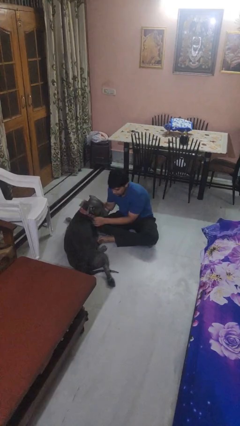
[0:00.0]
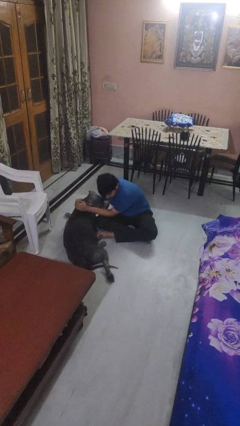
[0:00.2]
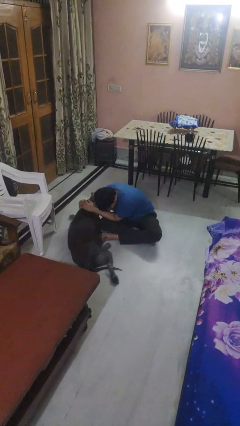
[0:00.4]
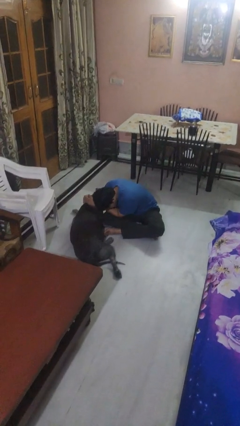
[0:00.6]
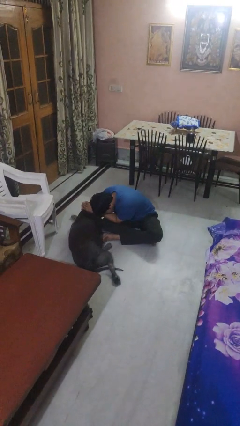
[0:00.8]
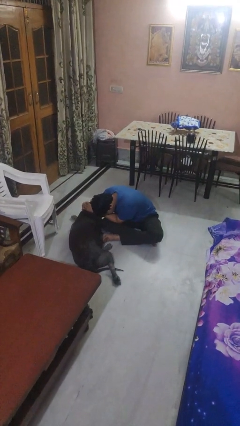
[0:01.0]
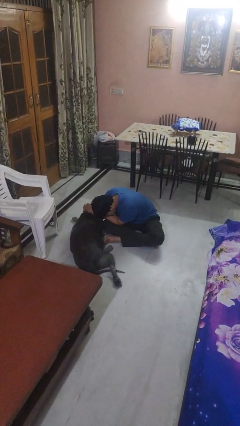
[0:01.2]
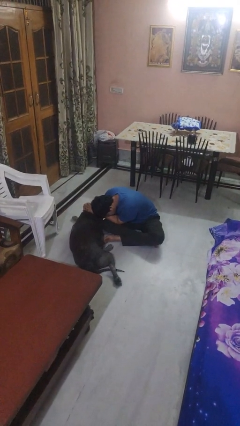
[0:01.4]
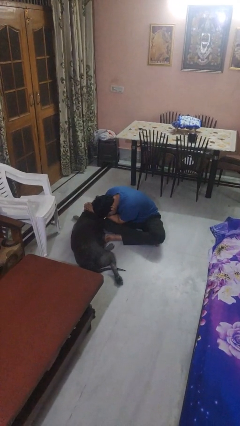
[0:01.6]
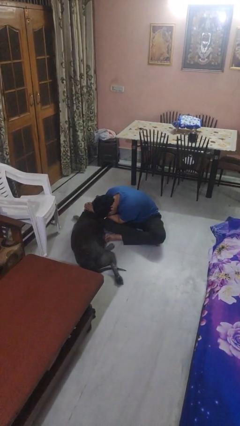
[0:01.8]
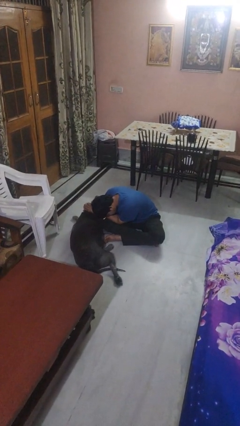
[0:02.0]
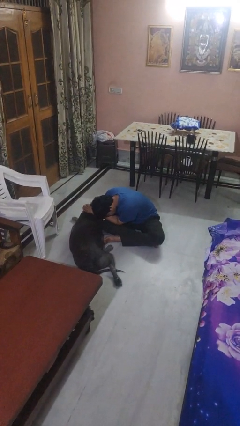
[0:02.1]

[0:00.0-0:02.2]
person hugs dog

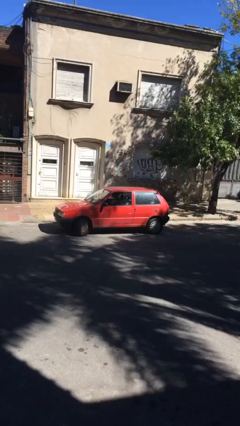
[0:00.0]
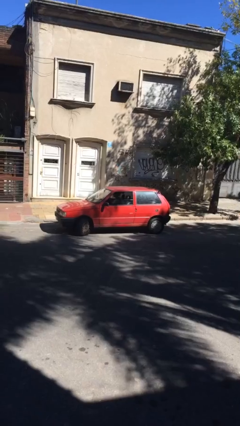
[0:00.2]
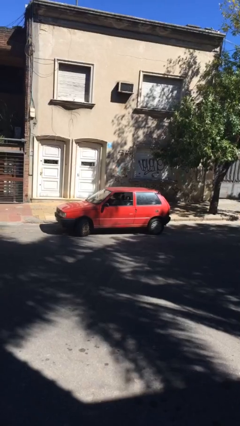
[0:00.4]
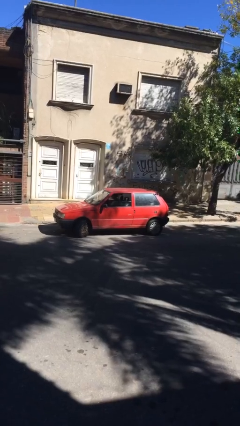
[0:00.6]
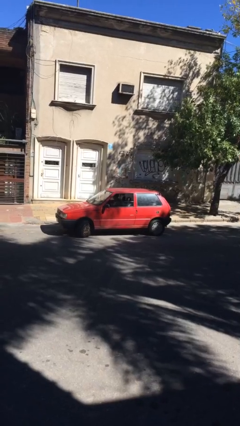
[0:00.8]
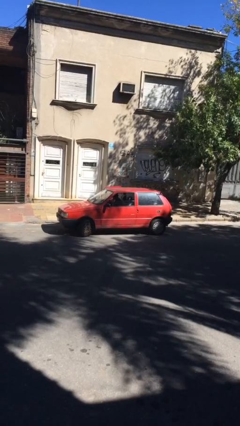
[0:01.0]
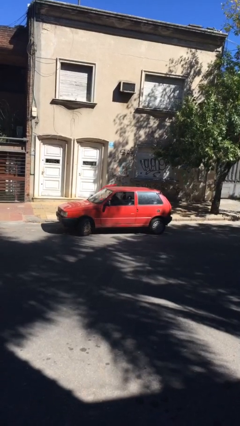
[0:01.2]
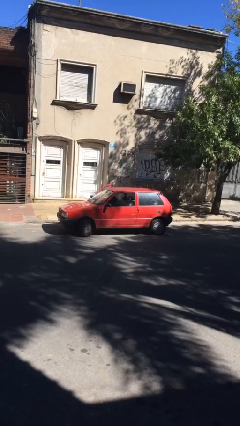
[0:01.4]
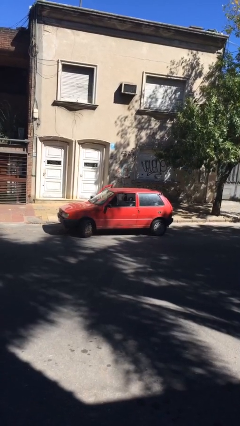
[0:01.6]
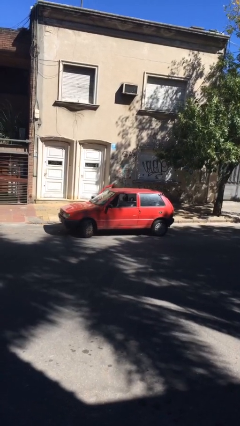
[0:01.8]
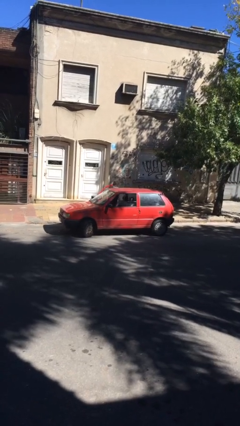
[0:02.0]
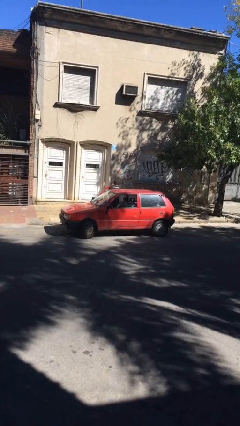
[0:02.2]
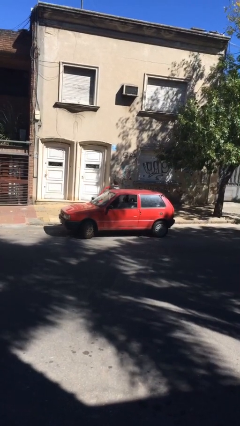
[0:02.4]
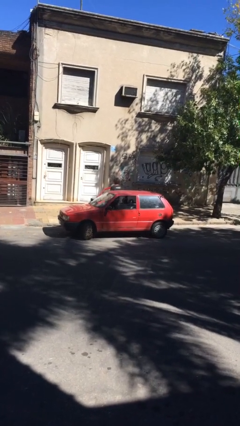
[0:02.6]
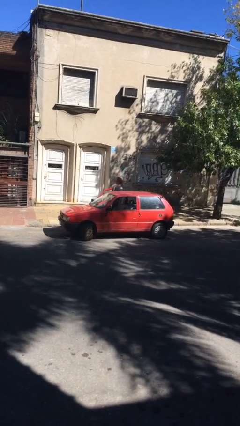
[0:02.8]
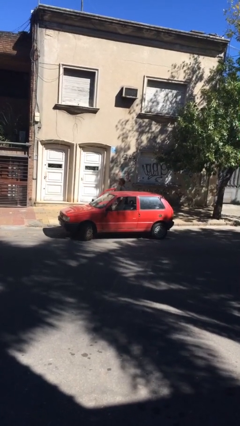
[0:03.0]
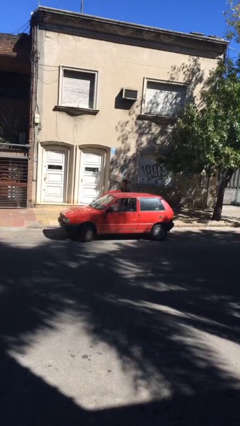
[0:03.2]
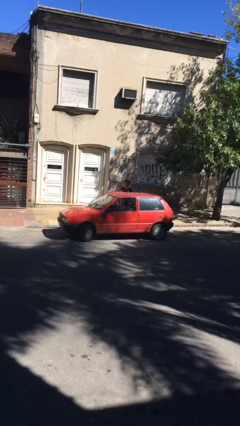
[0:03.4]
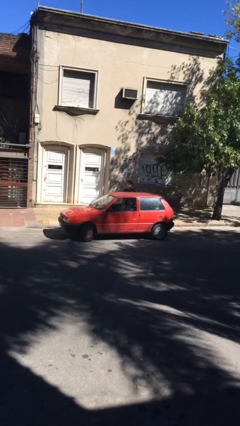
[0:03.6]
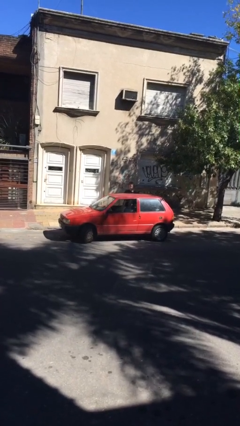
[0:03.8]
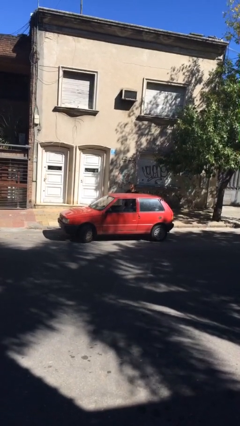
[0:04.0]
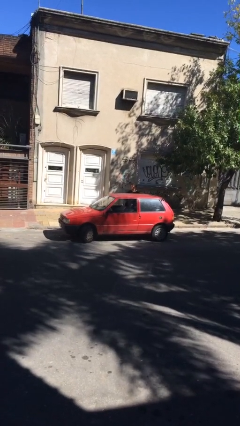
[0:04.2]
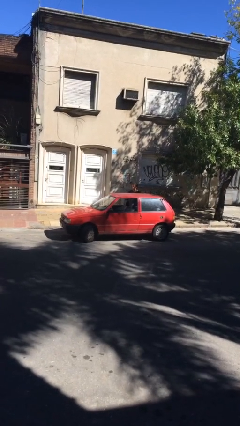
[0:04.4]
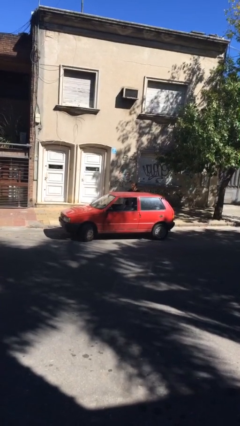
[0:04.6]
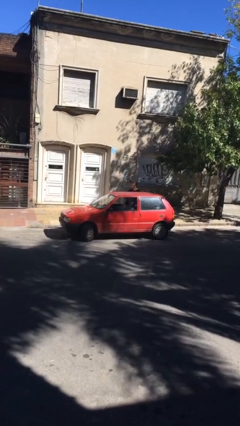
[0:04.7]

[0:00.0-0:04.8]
car drops off person

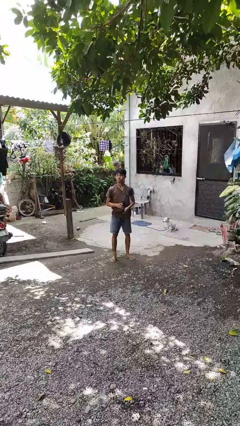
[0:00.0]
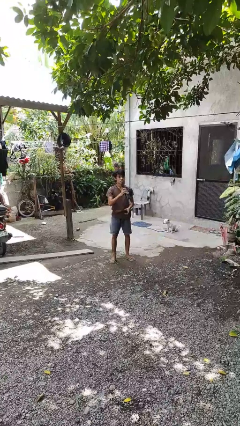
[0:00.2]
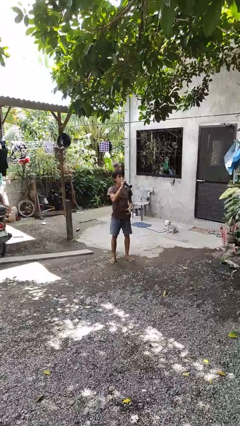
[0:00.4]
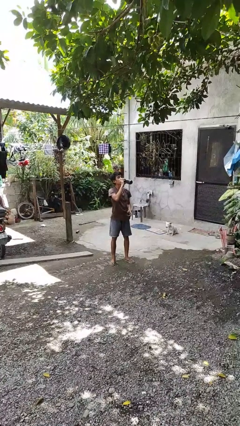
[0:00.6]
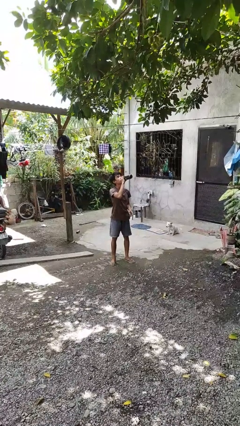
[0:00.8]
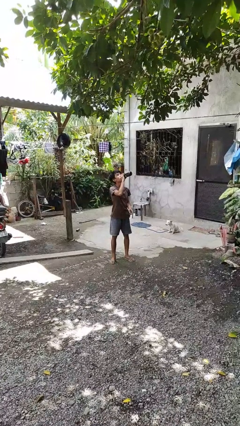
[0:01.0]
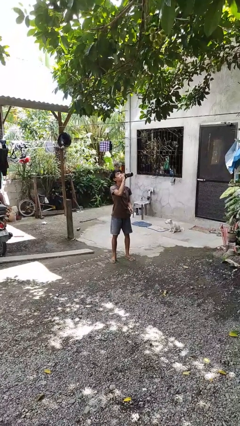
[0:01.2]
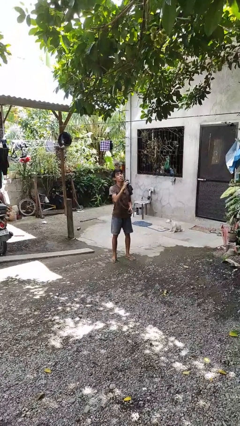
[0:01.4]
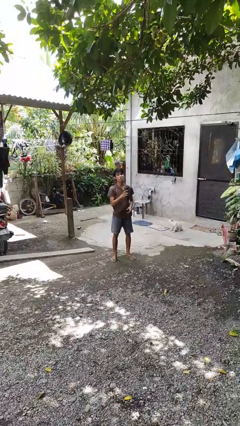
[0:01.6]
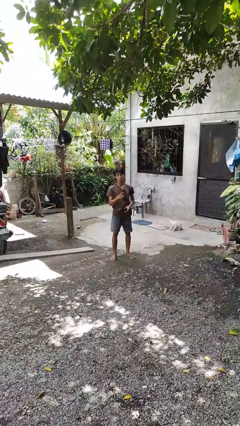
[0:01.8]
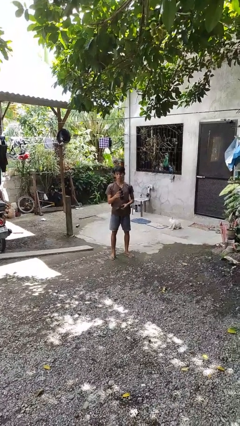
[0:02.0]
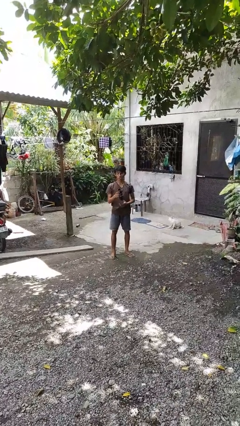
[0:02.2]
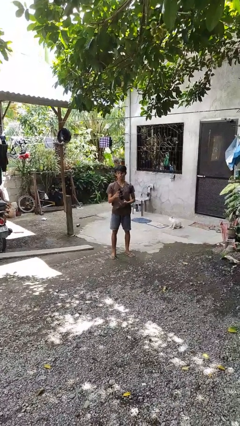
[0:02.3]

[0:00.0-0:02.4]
person drinks from bottle

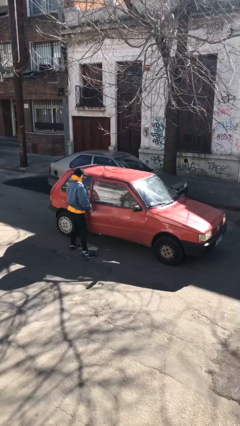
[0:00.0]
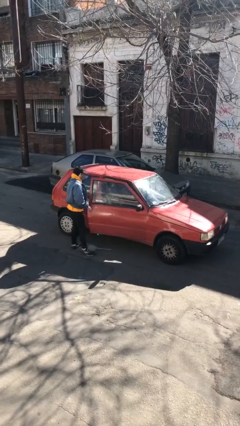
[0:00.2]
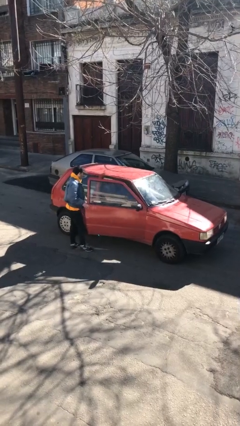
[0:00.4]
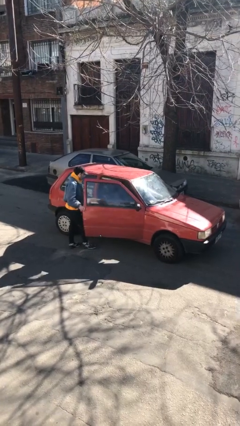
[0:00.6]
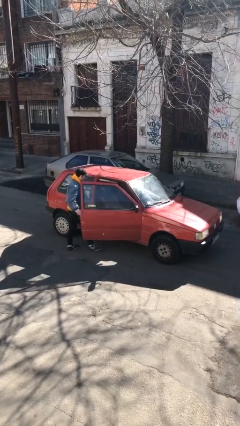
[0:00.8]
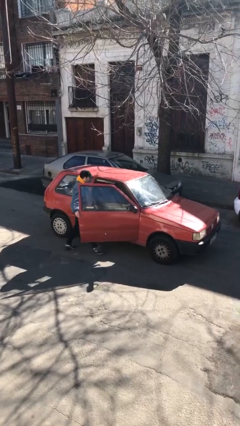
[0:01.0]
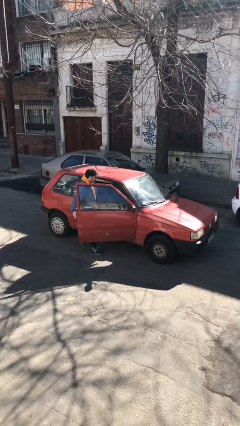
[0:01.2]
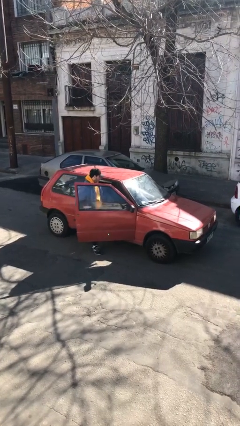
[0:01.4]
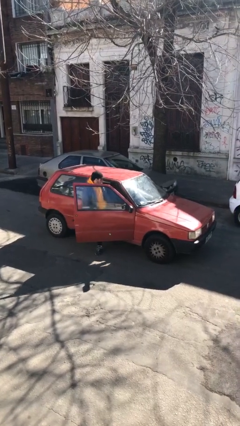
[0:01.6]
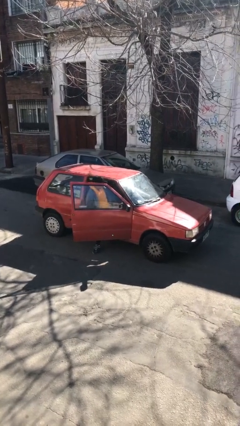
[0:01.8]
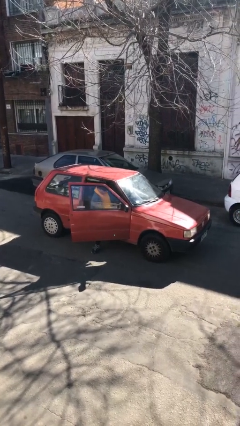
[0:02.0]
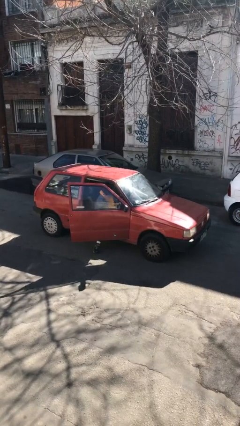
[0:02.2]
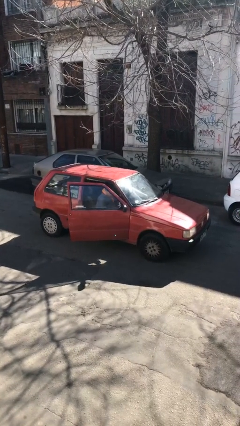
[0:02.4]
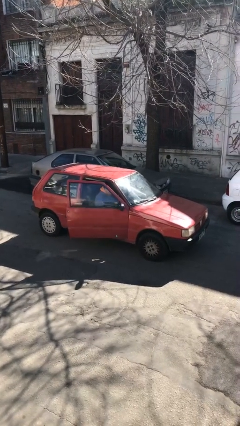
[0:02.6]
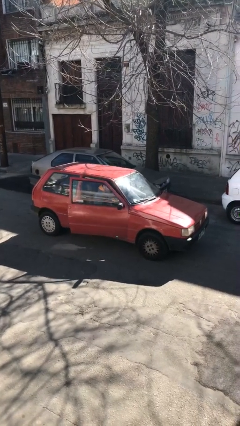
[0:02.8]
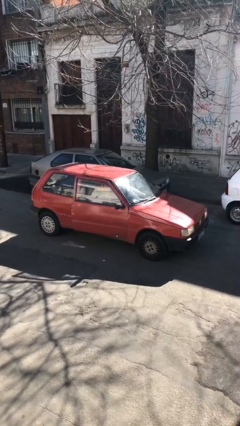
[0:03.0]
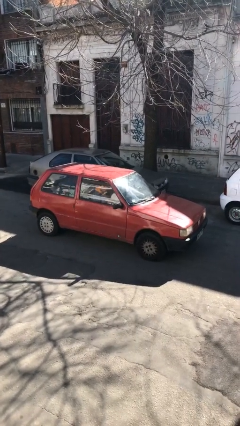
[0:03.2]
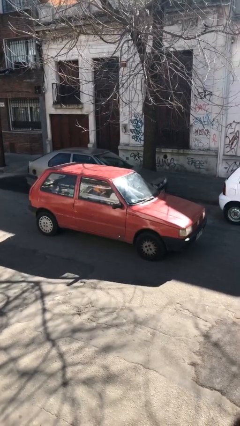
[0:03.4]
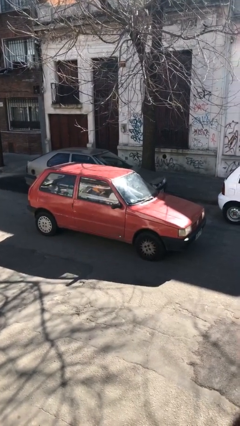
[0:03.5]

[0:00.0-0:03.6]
car picks up person

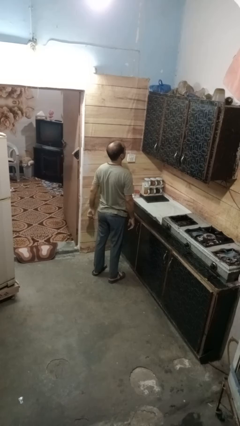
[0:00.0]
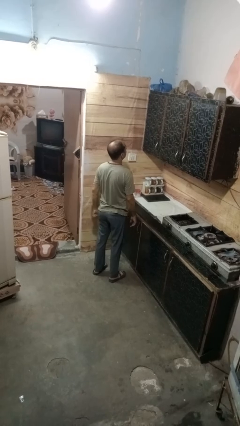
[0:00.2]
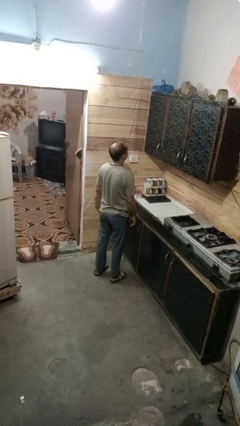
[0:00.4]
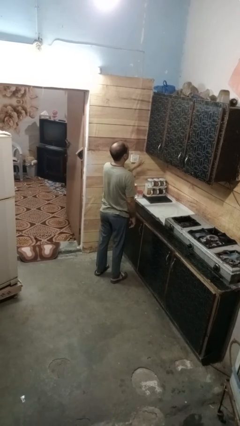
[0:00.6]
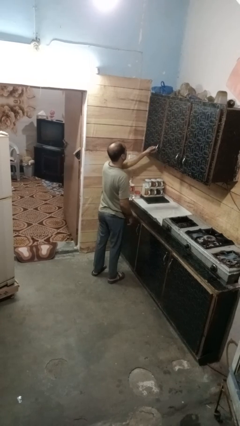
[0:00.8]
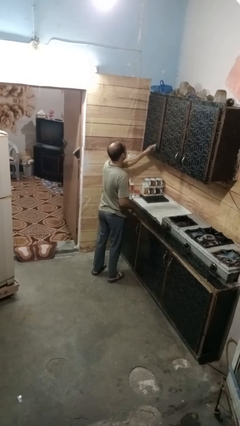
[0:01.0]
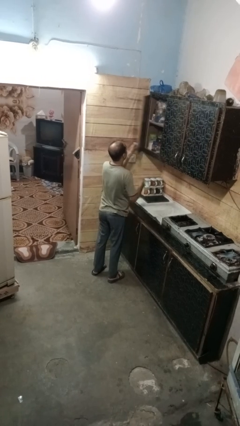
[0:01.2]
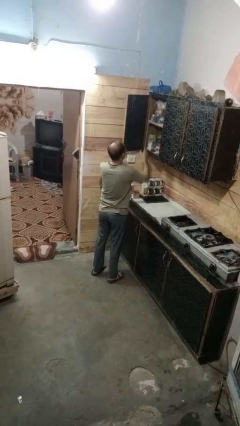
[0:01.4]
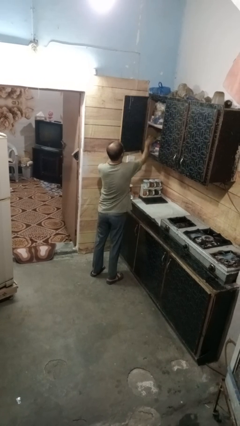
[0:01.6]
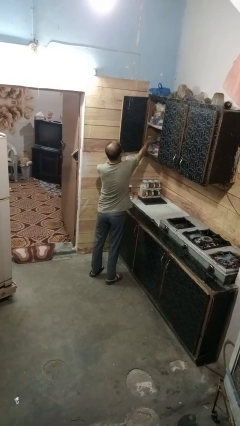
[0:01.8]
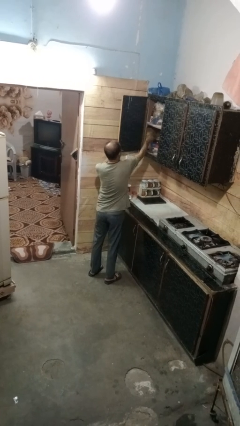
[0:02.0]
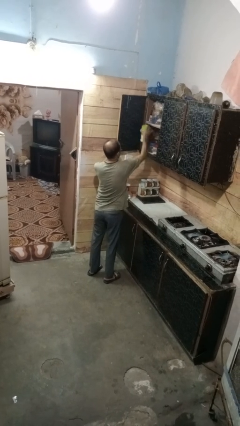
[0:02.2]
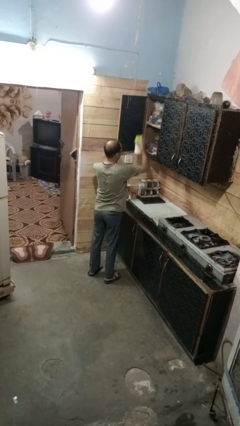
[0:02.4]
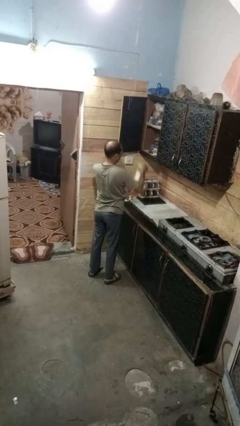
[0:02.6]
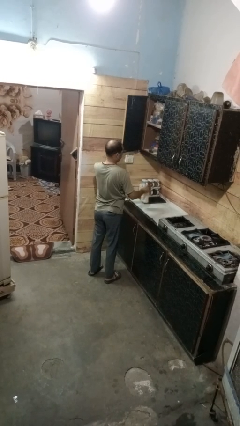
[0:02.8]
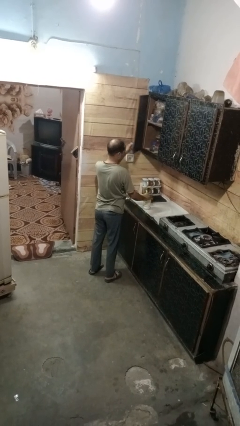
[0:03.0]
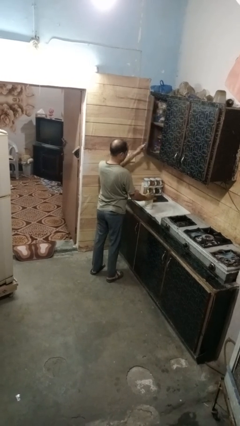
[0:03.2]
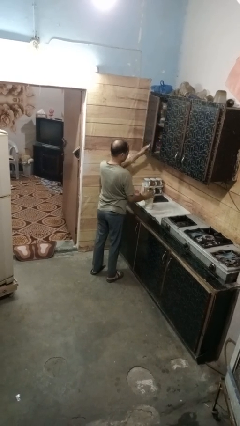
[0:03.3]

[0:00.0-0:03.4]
person takes object from cabinet

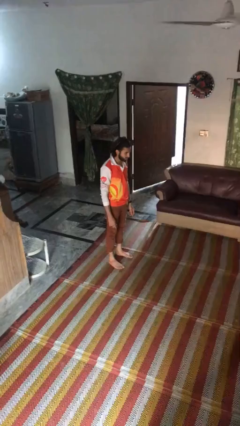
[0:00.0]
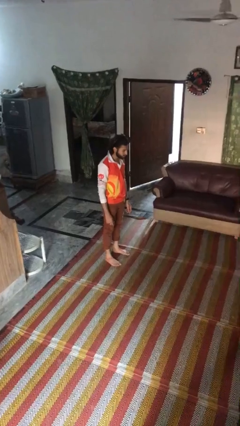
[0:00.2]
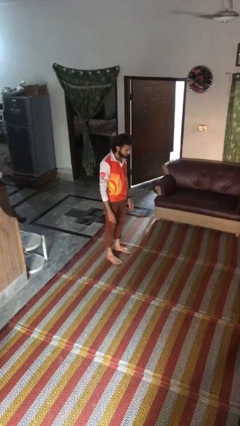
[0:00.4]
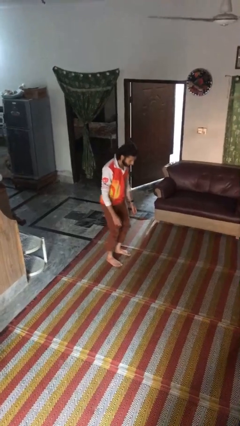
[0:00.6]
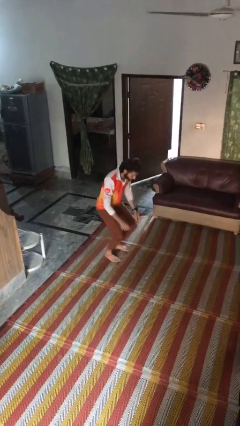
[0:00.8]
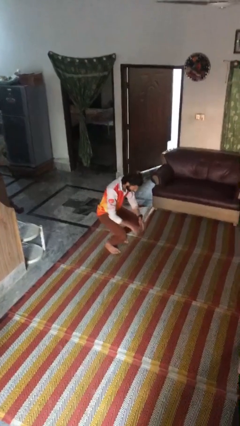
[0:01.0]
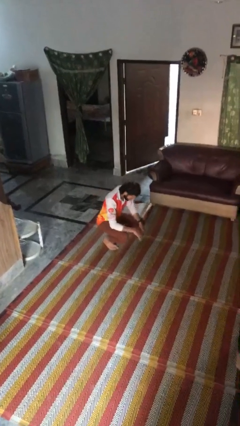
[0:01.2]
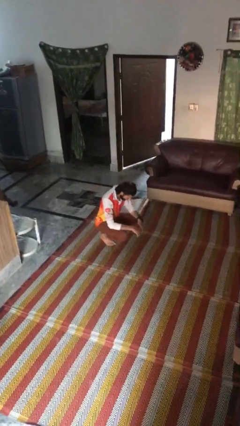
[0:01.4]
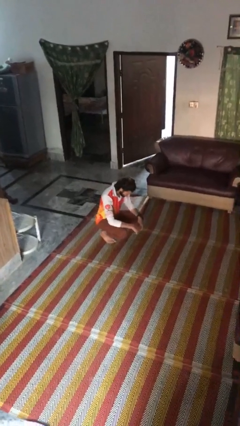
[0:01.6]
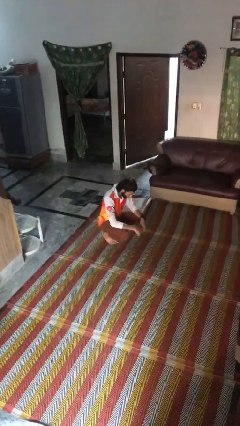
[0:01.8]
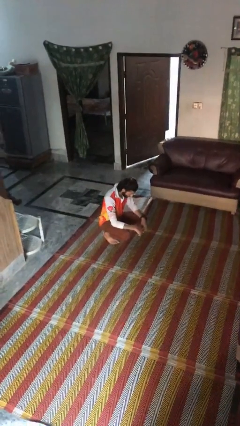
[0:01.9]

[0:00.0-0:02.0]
person squats
